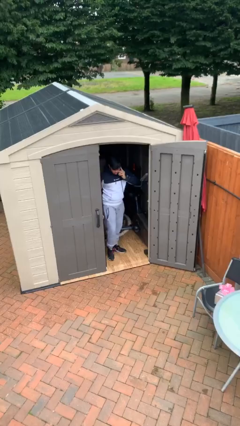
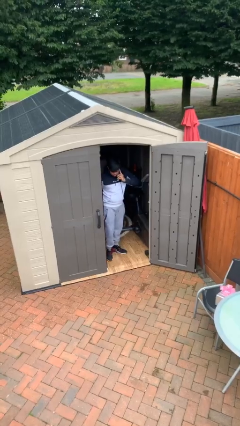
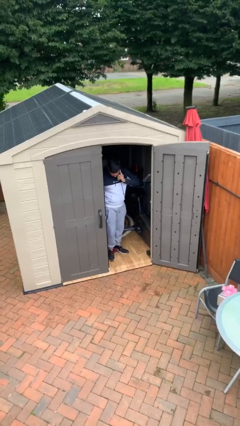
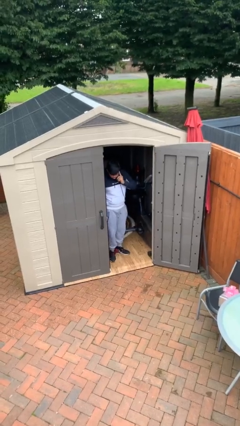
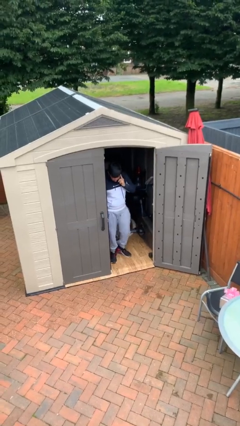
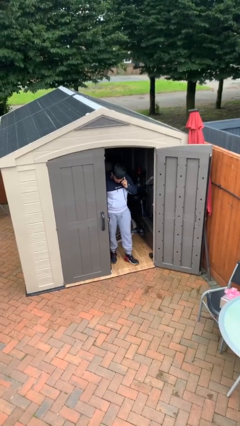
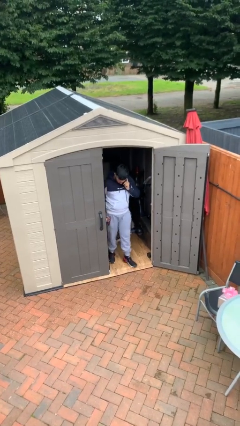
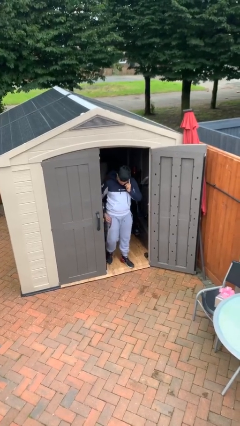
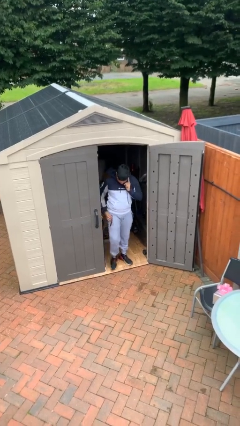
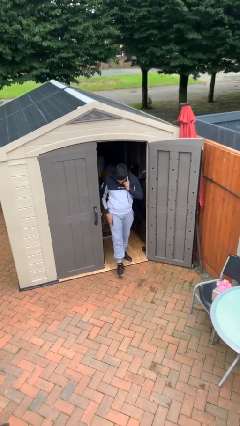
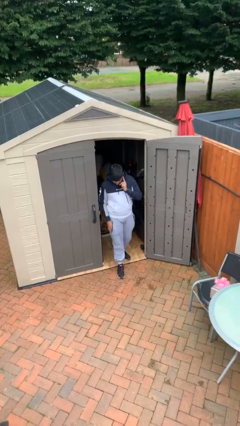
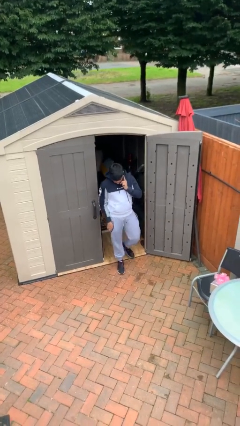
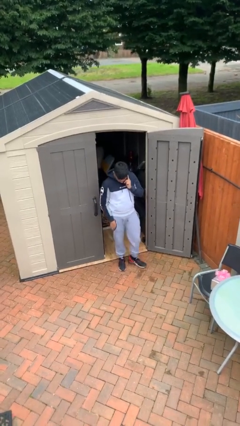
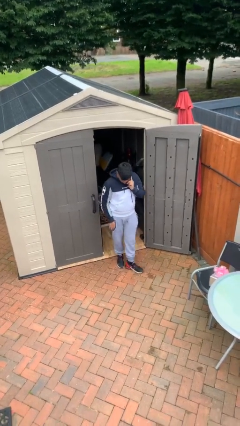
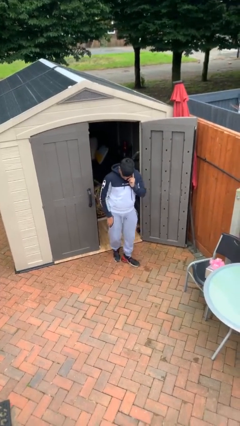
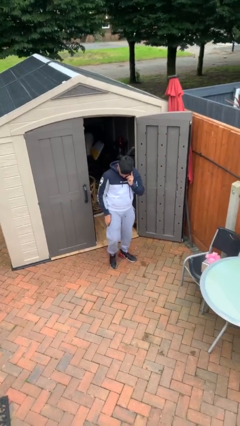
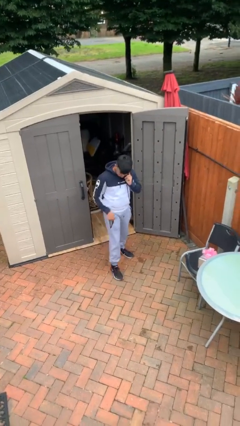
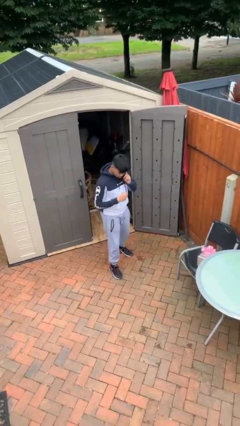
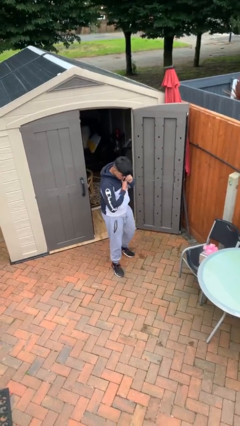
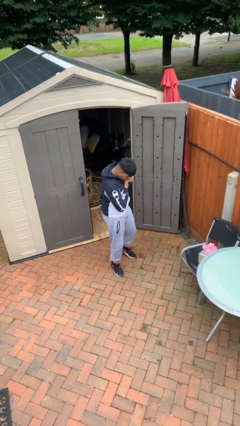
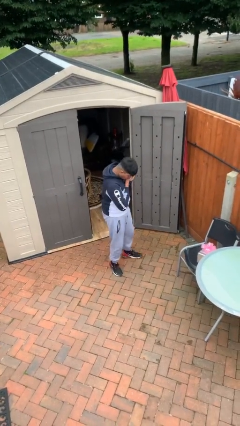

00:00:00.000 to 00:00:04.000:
person enters scene through structure

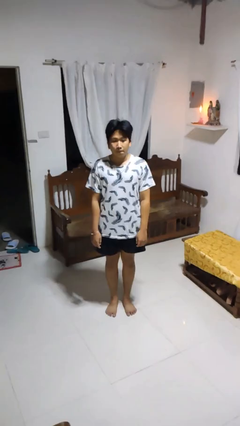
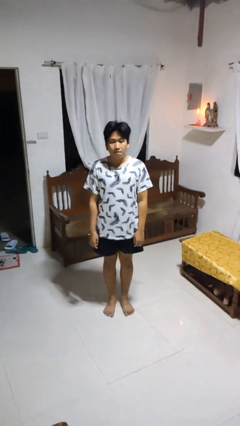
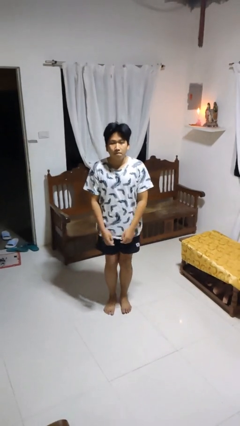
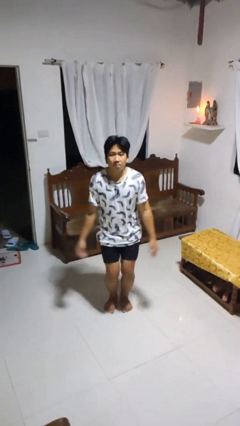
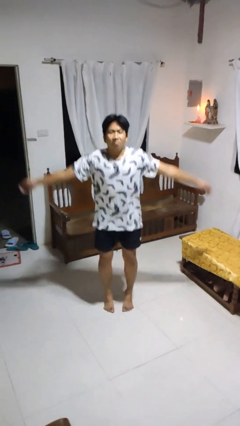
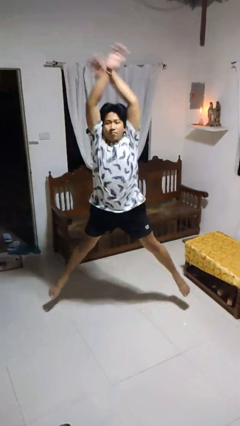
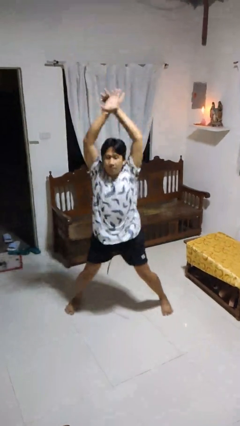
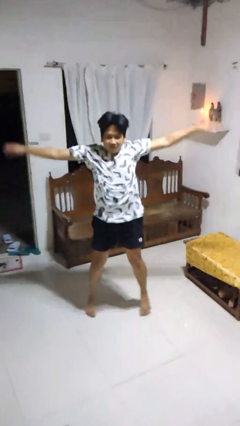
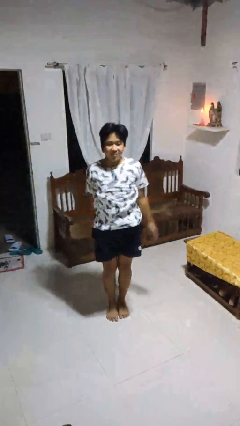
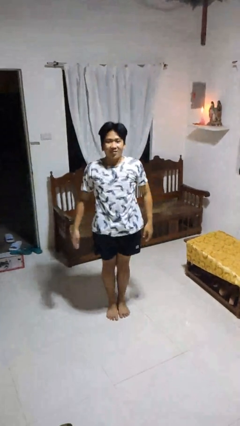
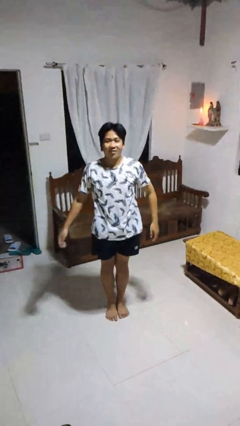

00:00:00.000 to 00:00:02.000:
person exercises with jumping jacks

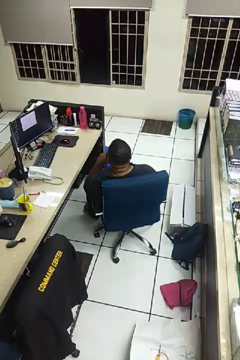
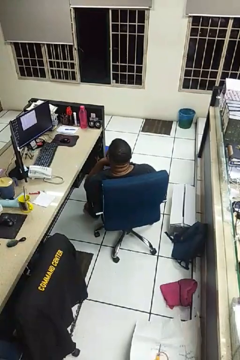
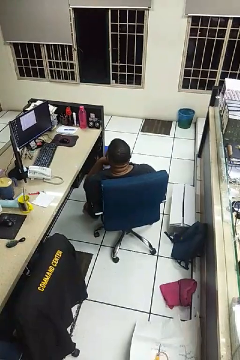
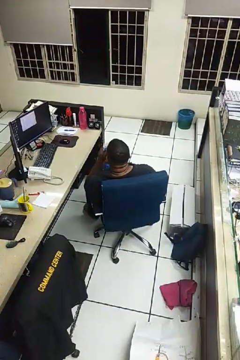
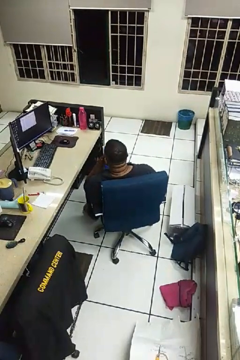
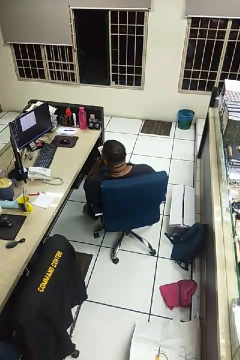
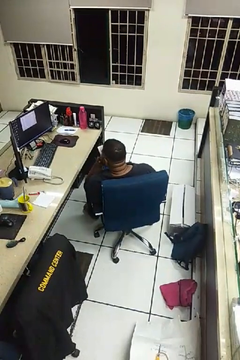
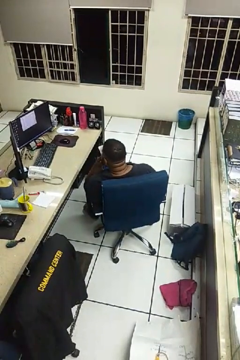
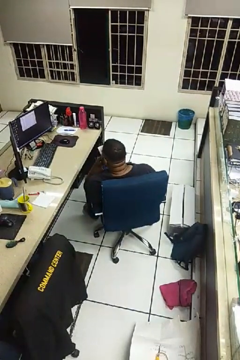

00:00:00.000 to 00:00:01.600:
person blows nose

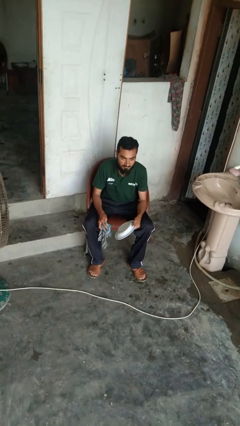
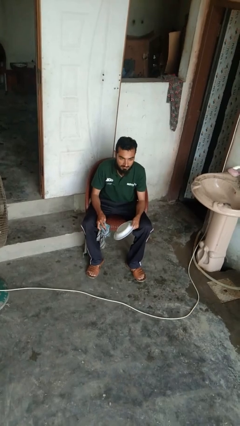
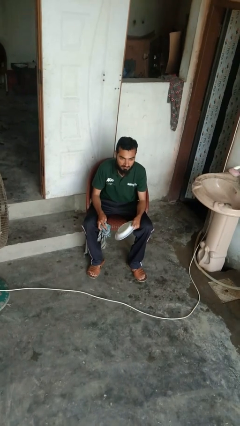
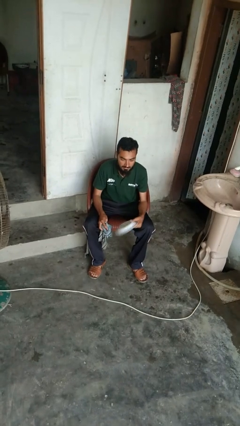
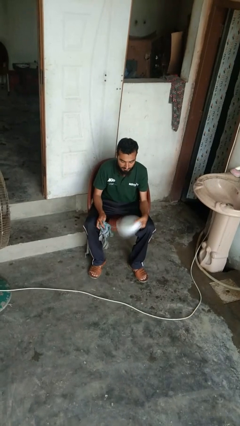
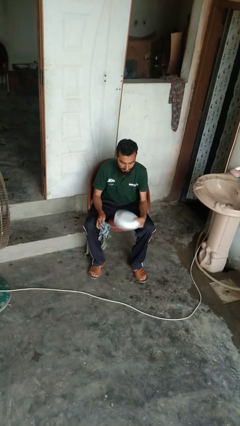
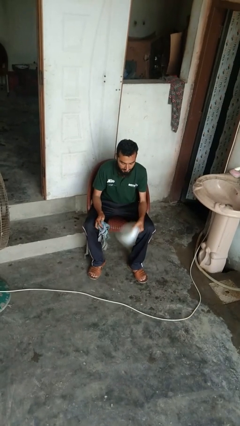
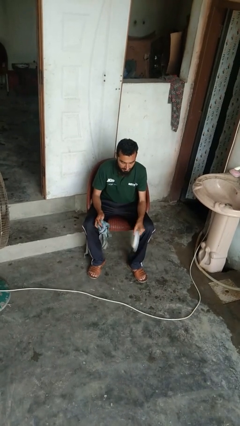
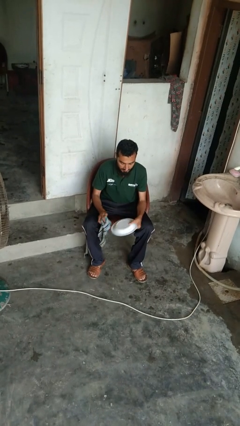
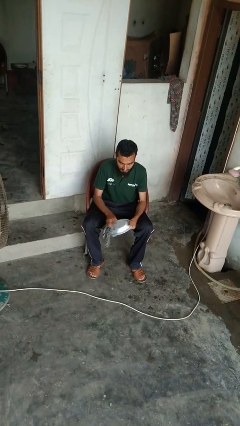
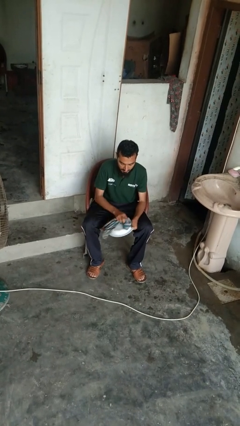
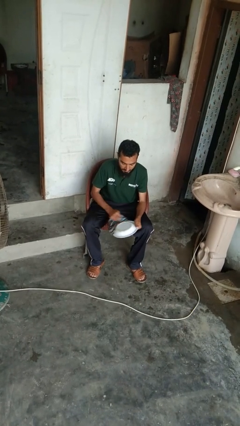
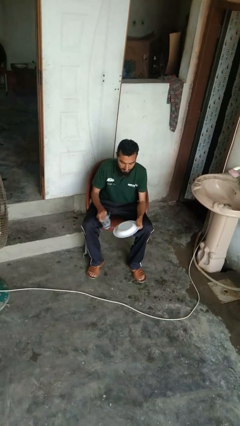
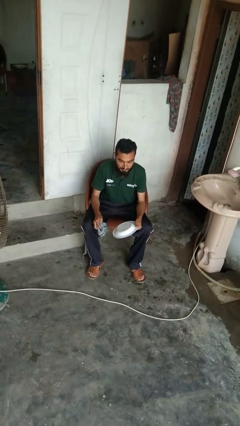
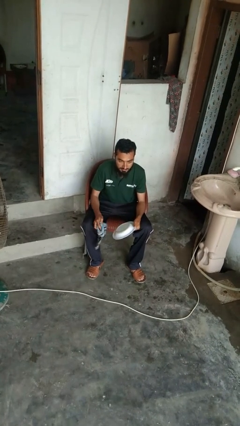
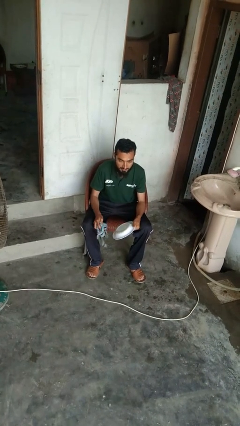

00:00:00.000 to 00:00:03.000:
person dries dish

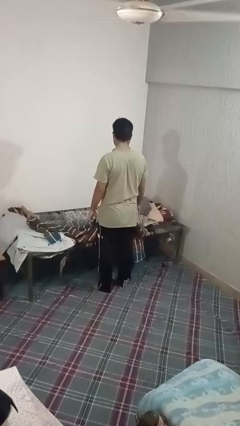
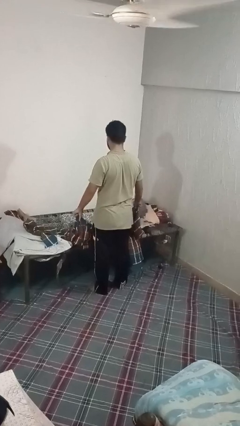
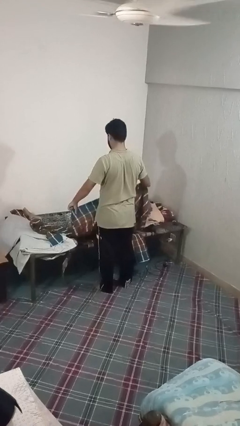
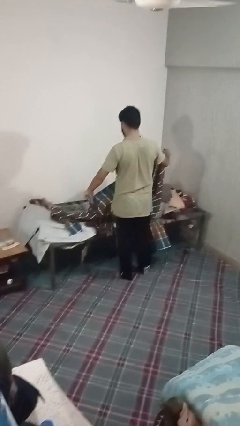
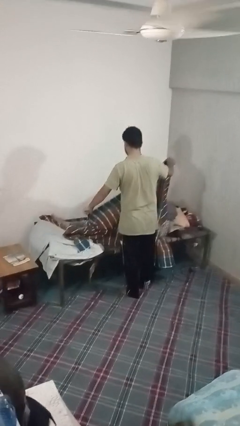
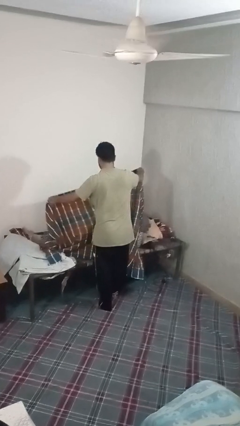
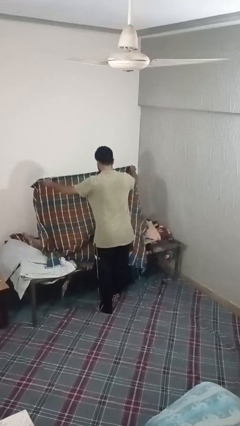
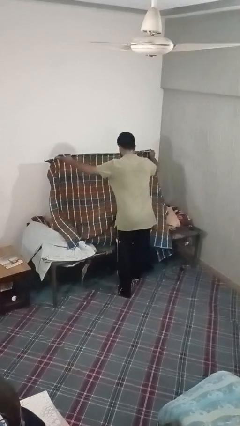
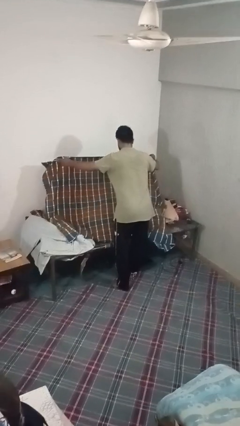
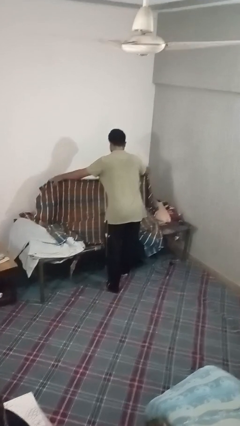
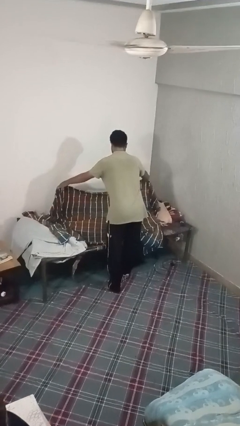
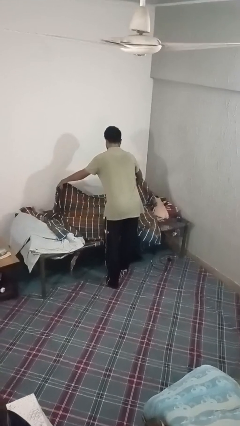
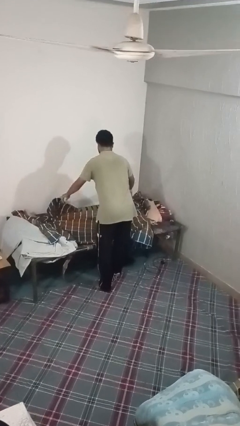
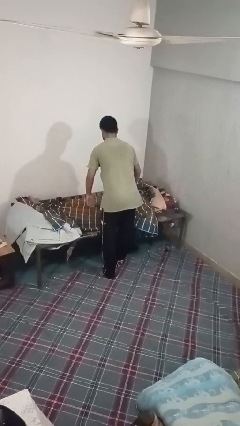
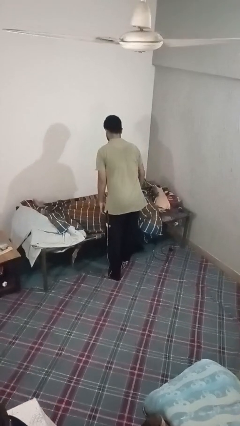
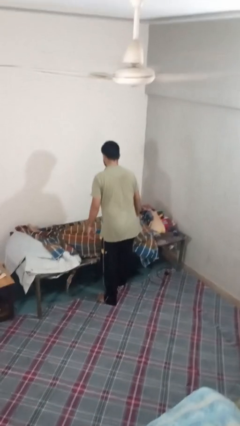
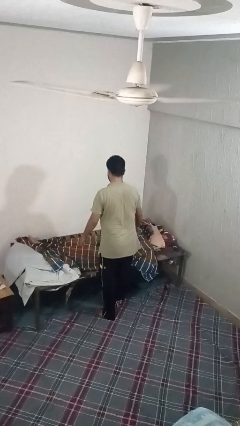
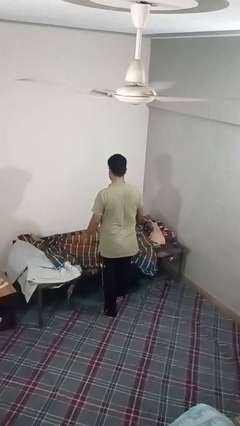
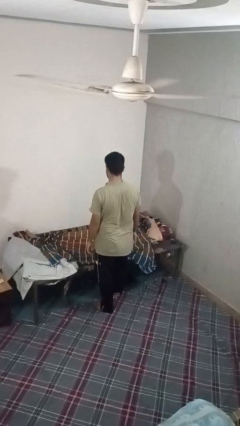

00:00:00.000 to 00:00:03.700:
person covers friend with blanket

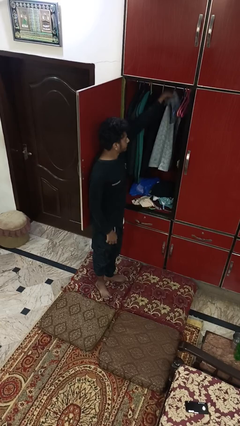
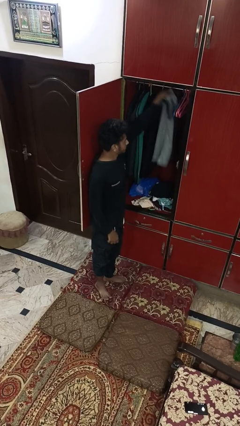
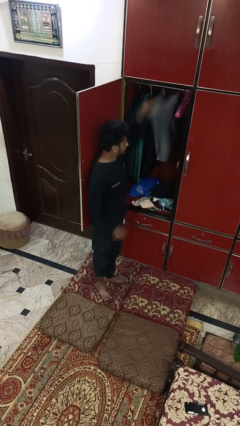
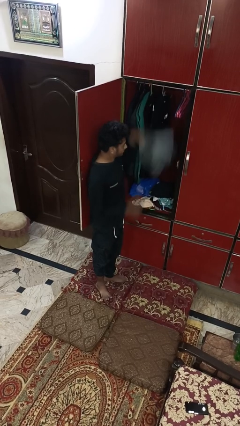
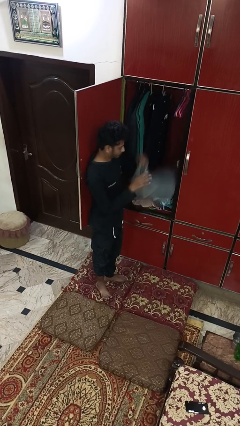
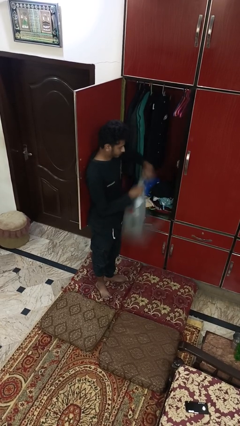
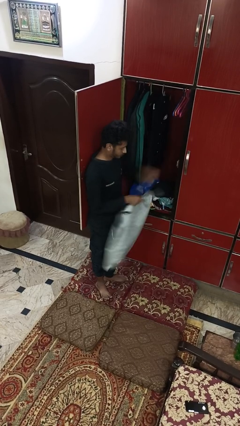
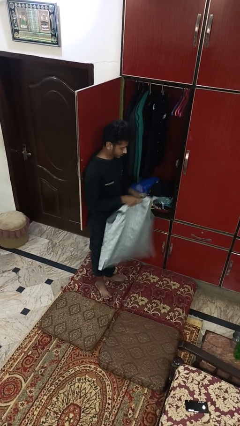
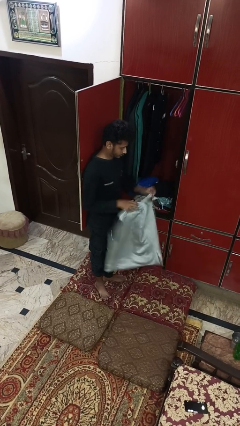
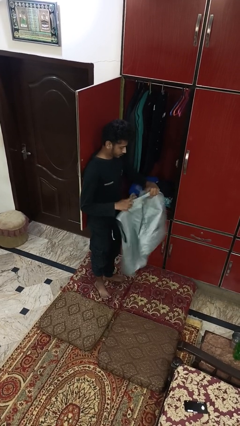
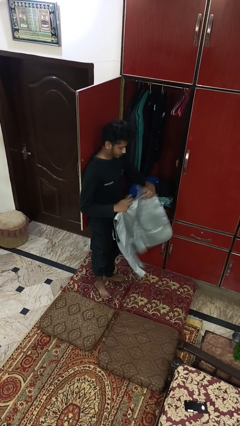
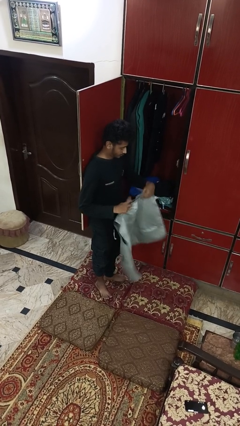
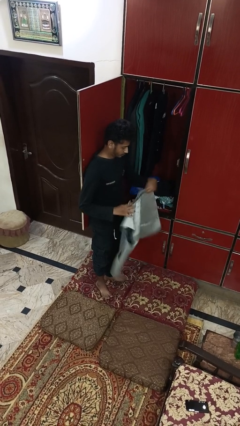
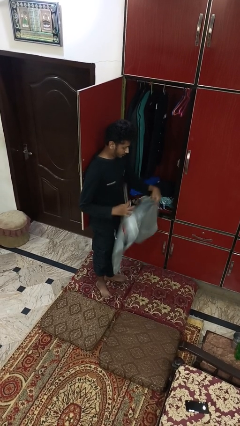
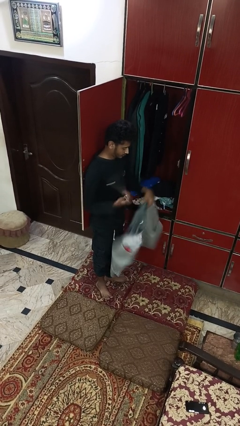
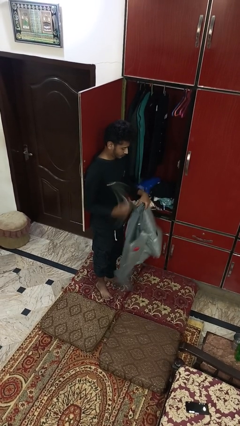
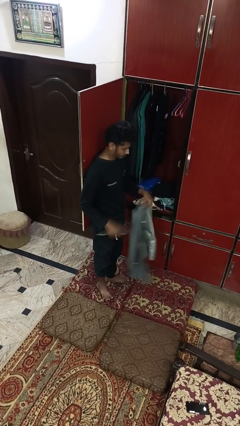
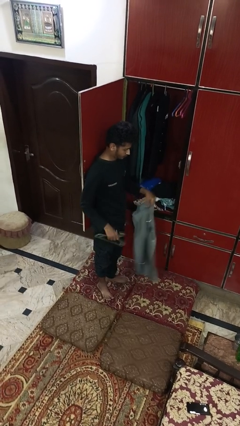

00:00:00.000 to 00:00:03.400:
person takes clothes from closet

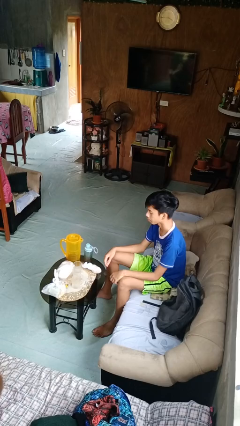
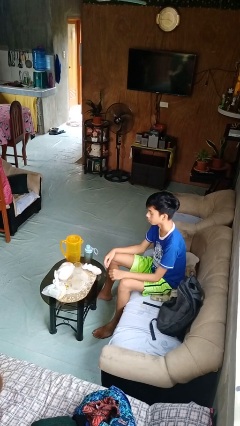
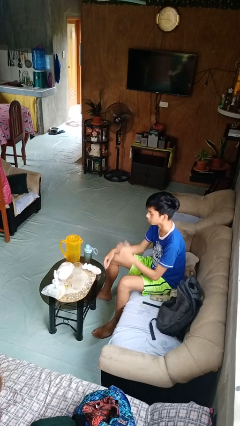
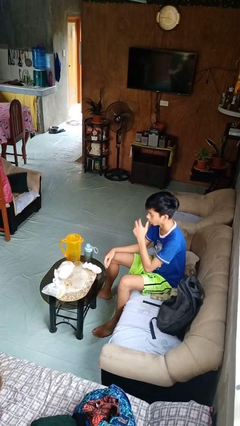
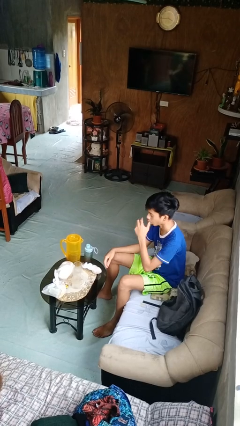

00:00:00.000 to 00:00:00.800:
person licks fingers
